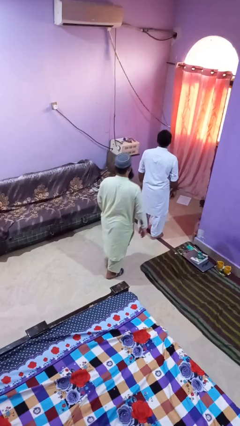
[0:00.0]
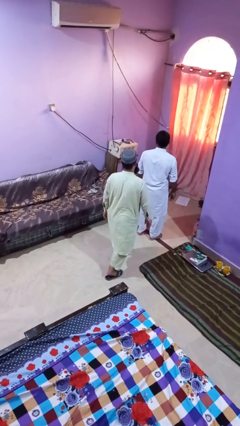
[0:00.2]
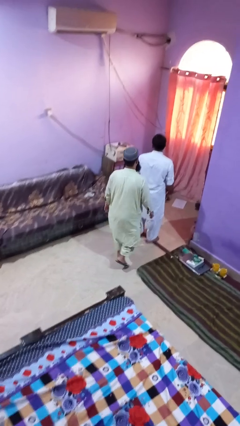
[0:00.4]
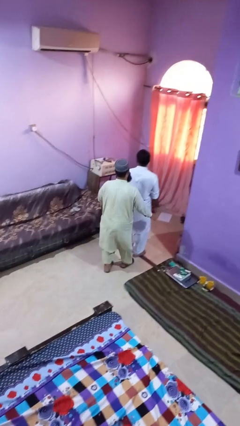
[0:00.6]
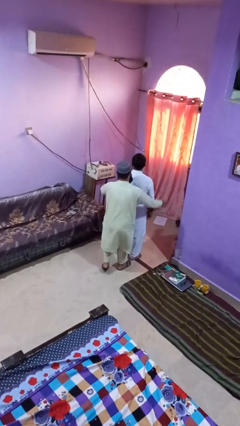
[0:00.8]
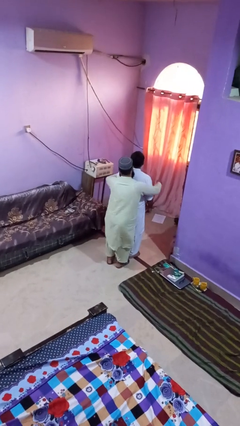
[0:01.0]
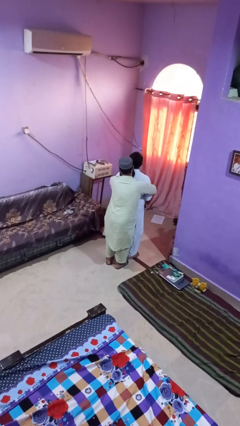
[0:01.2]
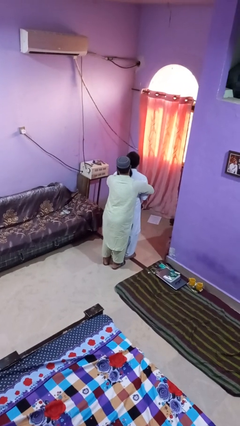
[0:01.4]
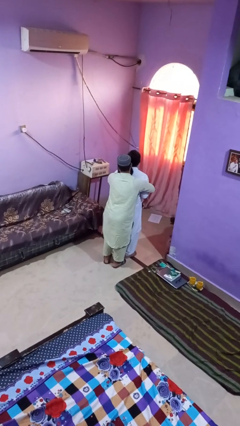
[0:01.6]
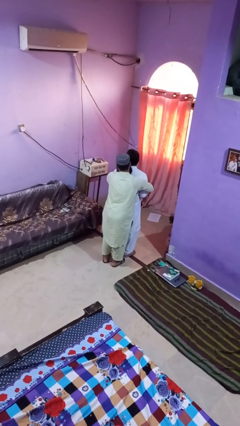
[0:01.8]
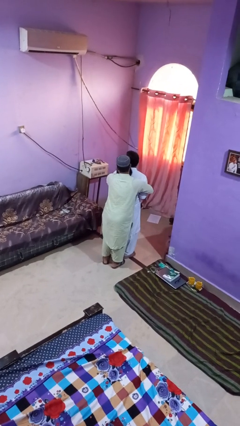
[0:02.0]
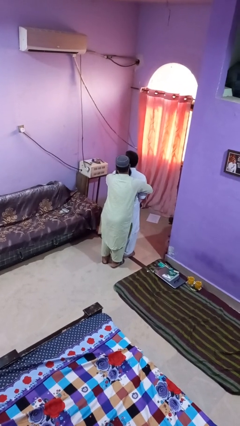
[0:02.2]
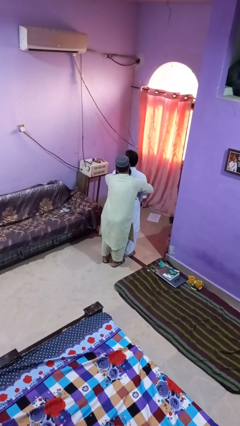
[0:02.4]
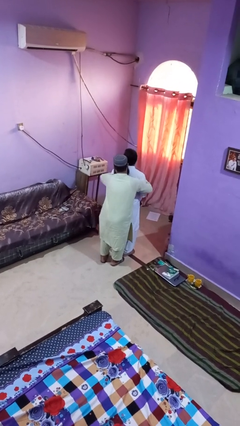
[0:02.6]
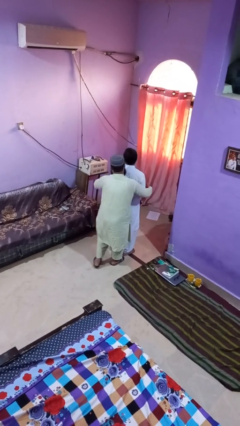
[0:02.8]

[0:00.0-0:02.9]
person hugs person from behind

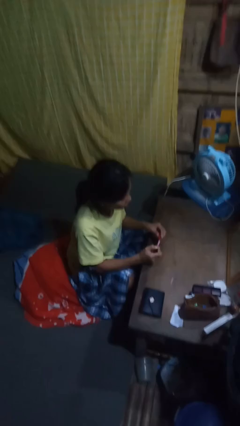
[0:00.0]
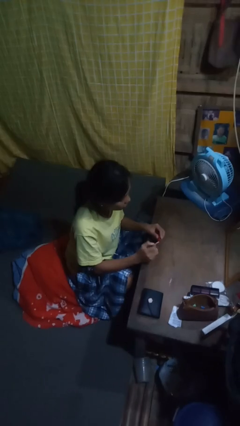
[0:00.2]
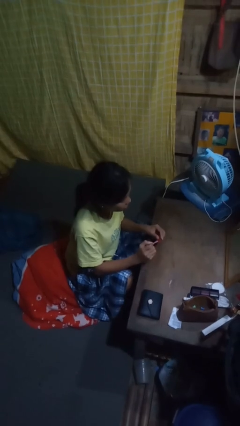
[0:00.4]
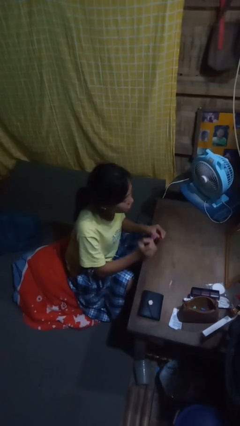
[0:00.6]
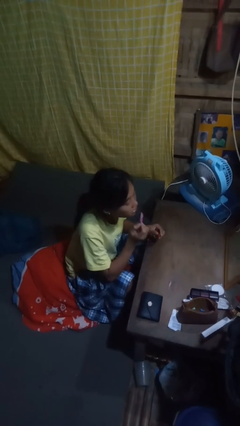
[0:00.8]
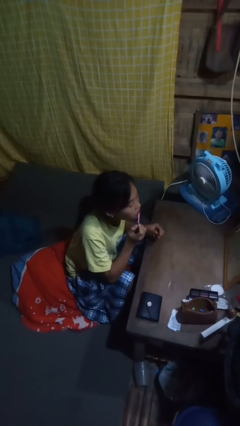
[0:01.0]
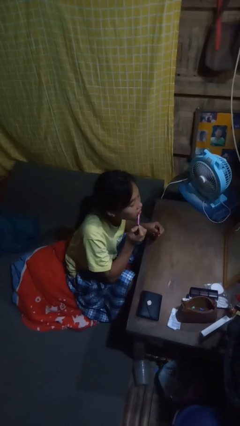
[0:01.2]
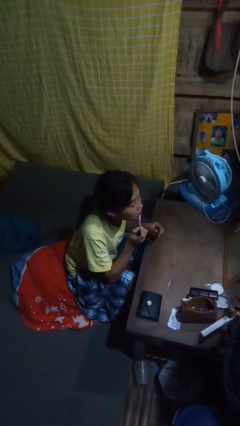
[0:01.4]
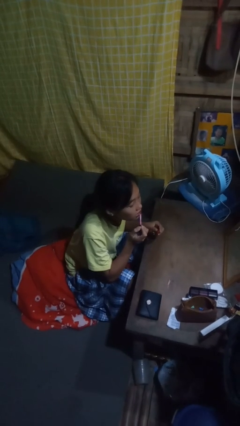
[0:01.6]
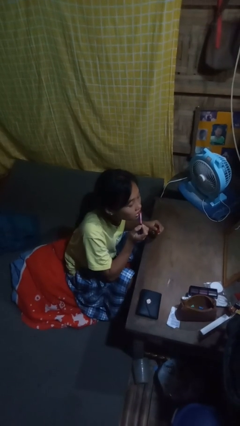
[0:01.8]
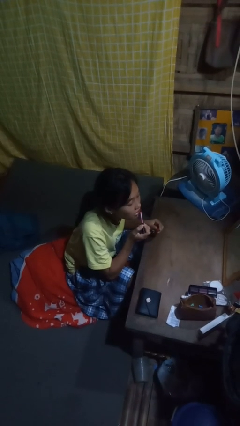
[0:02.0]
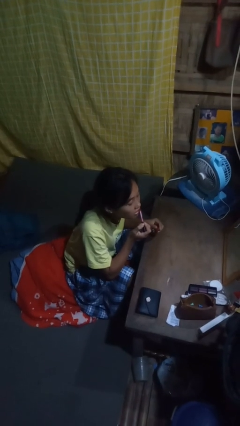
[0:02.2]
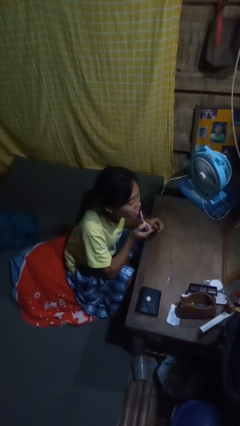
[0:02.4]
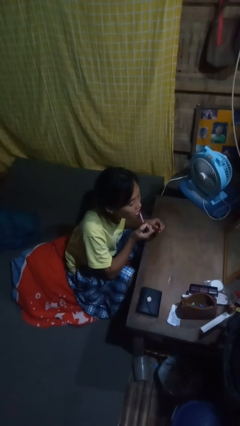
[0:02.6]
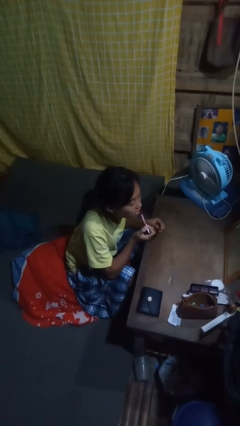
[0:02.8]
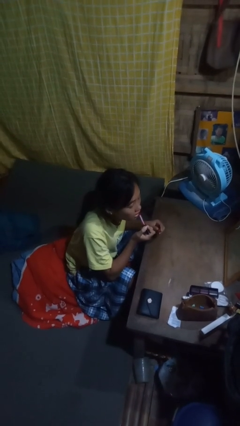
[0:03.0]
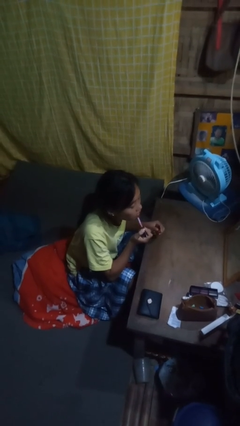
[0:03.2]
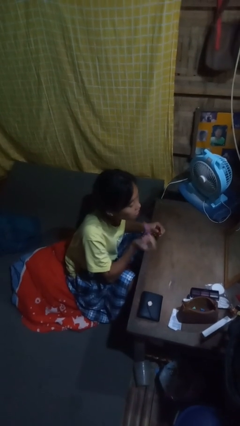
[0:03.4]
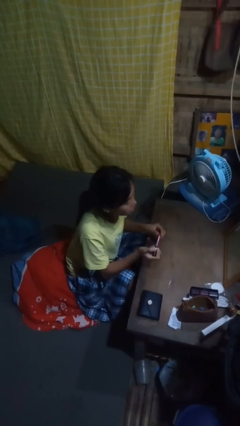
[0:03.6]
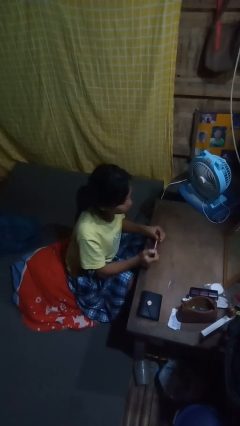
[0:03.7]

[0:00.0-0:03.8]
person applies lip makeup

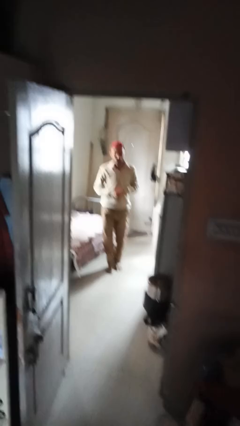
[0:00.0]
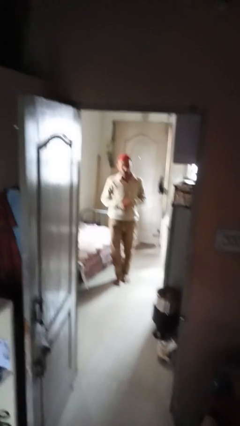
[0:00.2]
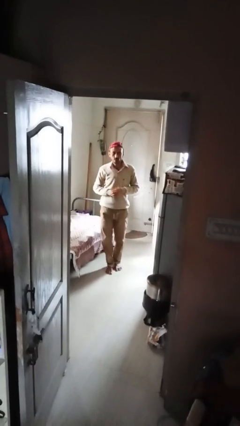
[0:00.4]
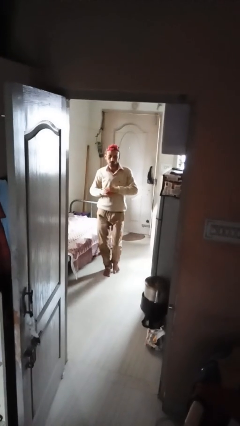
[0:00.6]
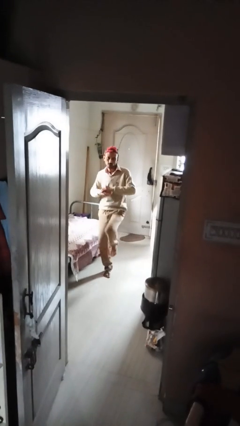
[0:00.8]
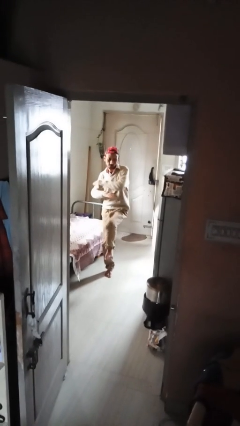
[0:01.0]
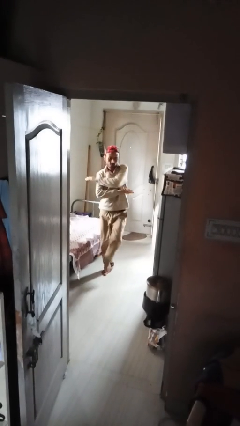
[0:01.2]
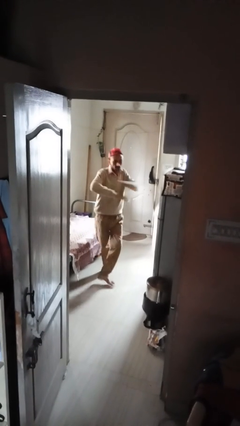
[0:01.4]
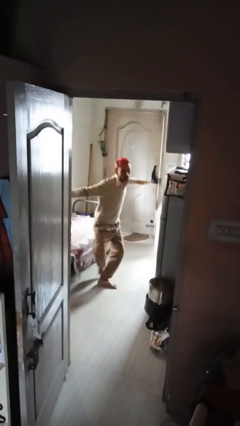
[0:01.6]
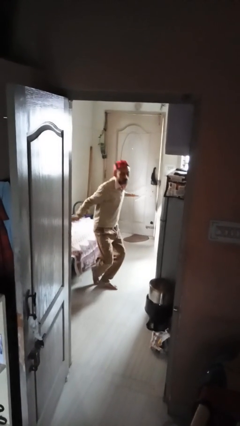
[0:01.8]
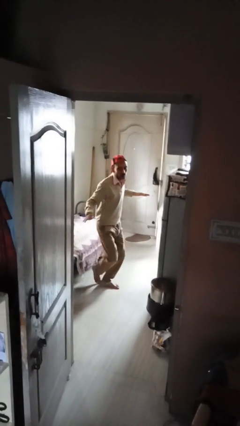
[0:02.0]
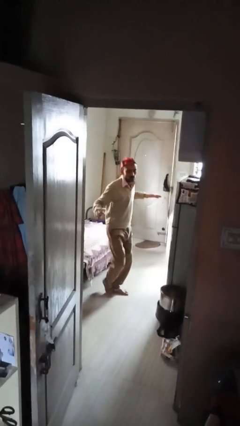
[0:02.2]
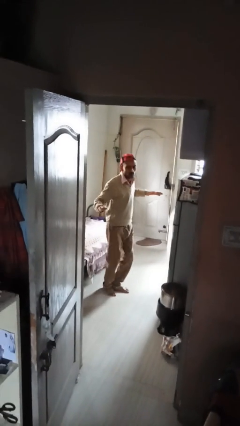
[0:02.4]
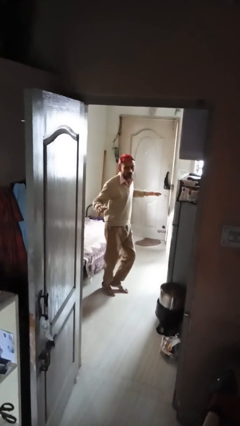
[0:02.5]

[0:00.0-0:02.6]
person karate chop

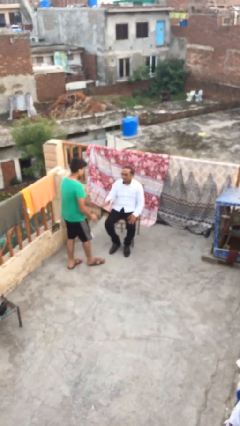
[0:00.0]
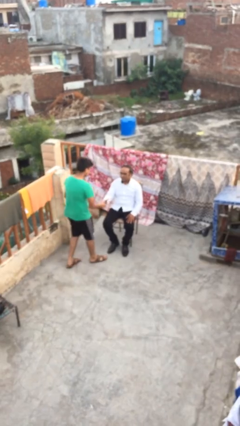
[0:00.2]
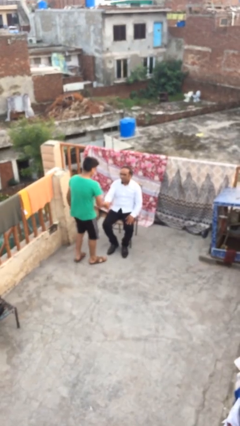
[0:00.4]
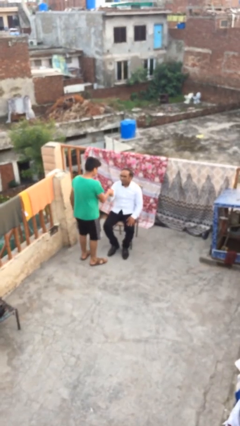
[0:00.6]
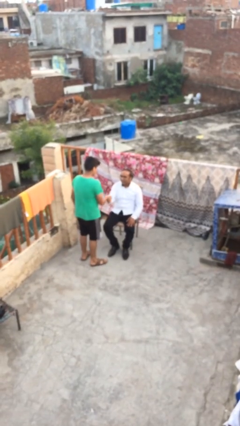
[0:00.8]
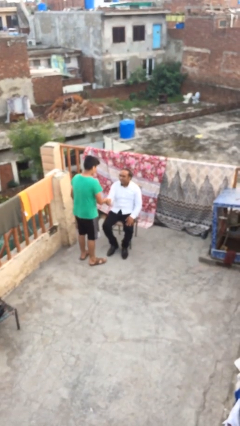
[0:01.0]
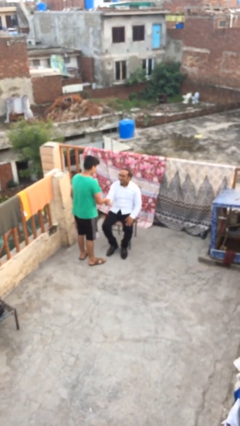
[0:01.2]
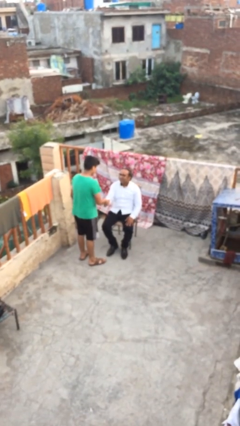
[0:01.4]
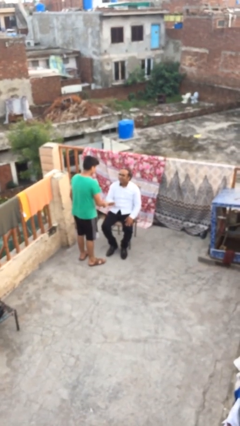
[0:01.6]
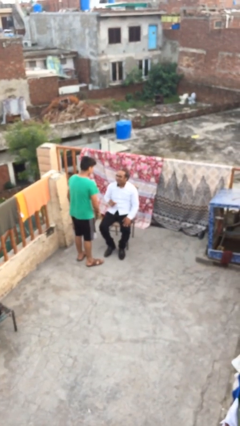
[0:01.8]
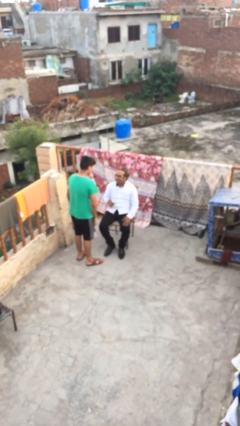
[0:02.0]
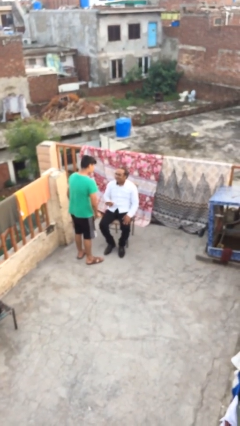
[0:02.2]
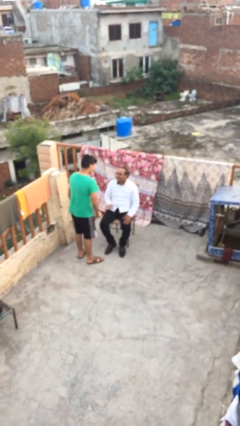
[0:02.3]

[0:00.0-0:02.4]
person shakes hand

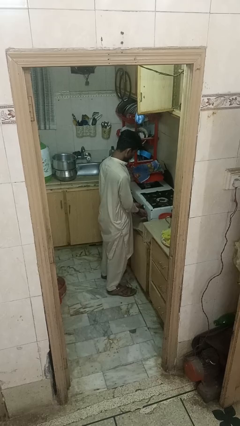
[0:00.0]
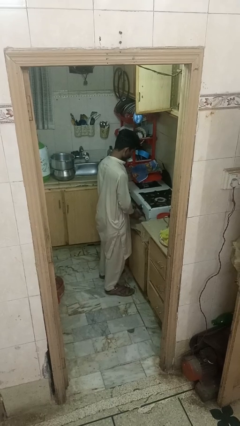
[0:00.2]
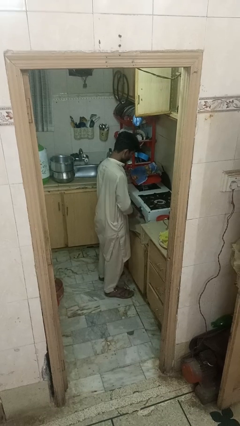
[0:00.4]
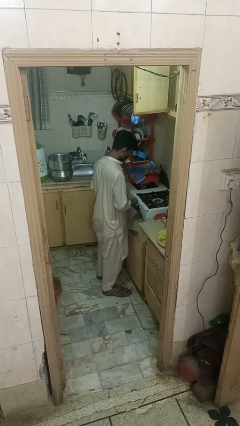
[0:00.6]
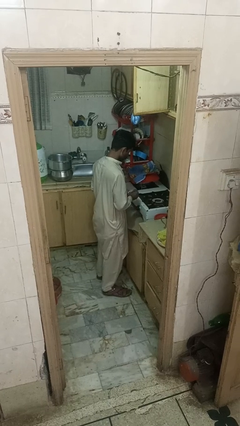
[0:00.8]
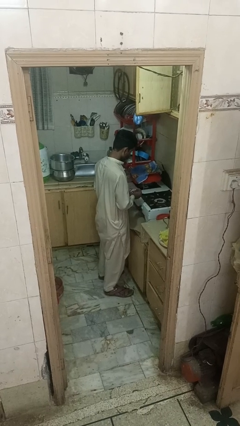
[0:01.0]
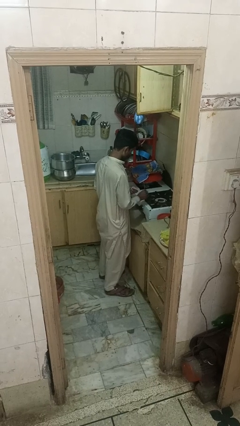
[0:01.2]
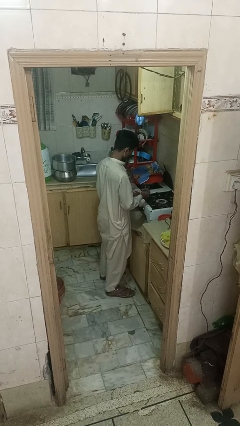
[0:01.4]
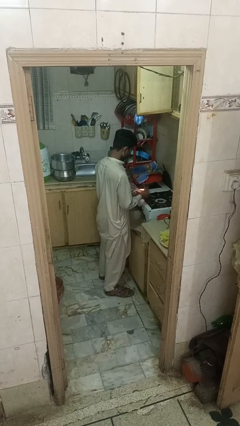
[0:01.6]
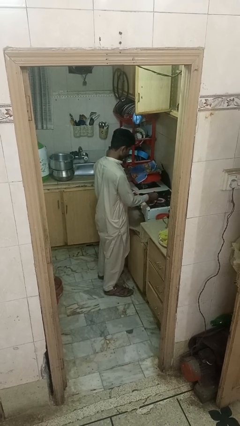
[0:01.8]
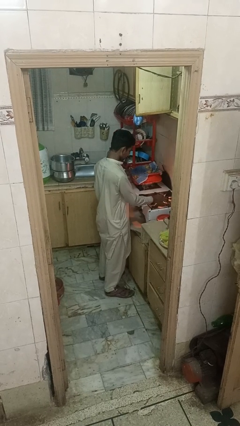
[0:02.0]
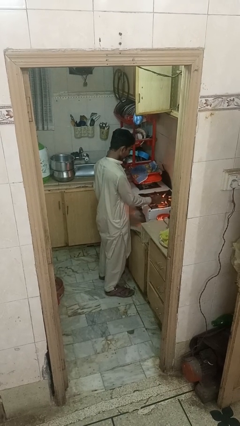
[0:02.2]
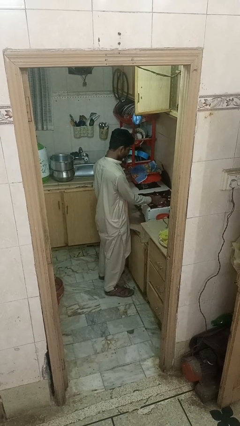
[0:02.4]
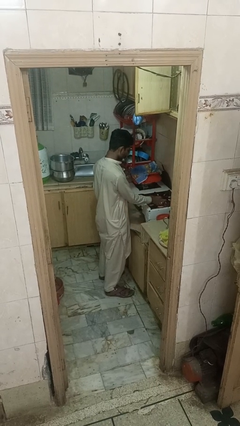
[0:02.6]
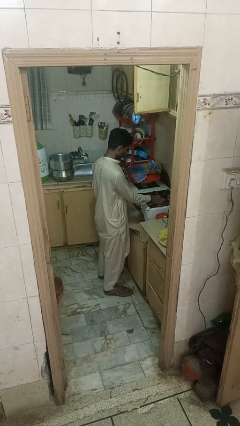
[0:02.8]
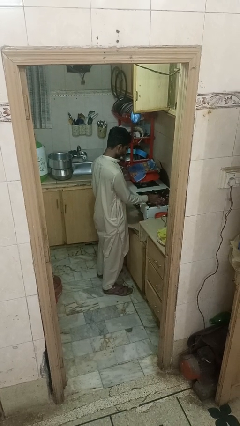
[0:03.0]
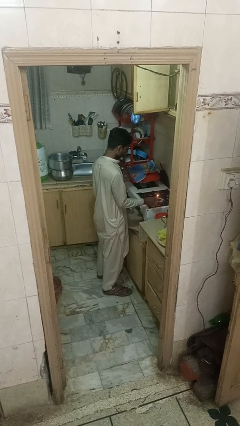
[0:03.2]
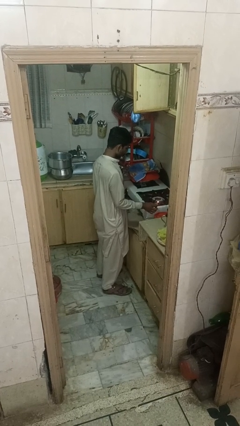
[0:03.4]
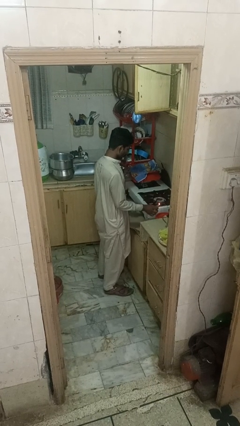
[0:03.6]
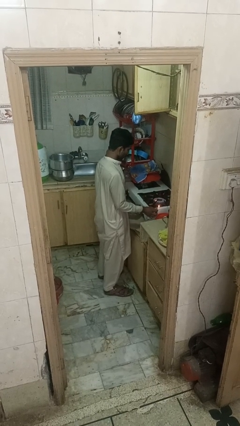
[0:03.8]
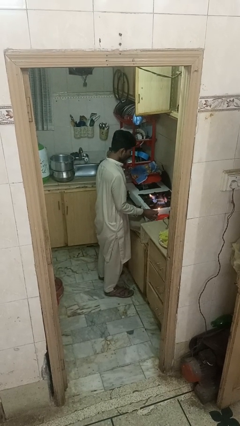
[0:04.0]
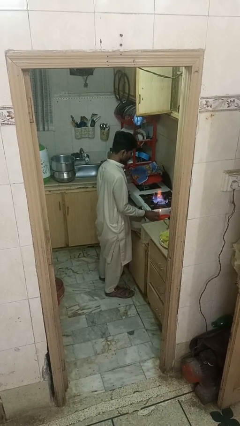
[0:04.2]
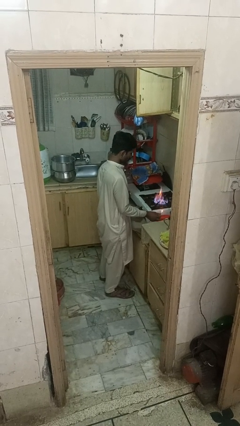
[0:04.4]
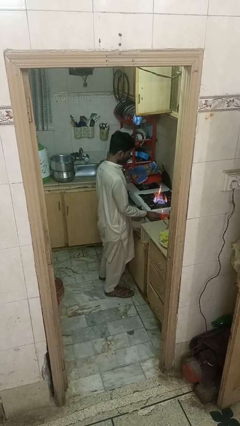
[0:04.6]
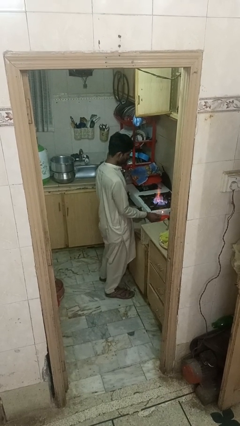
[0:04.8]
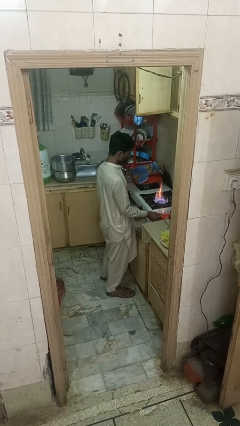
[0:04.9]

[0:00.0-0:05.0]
person turns on stovetop

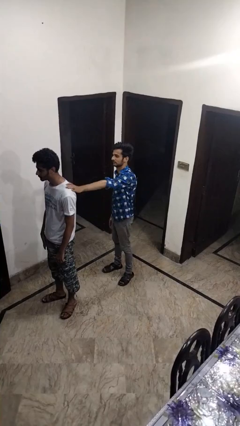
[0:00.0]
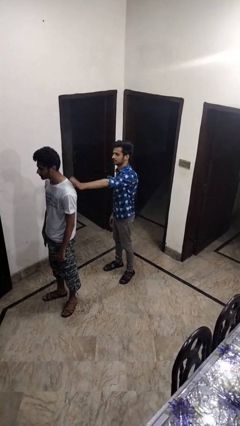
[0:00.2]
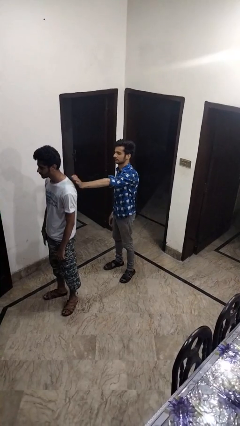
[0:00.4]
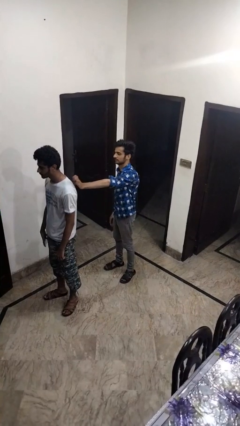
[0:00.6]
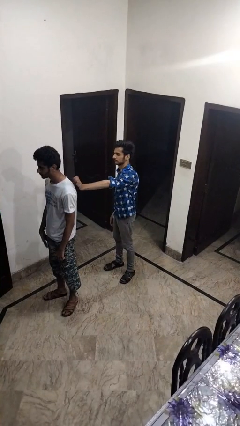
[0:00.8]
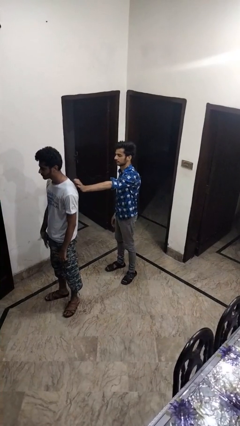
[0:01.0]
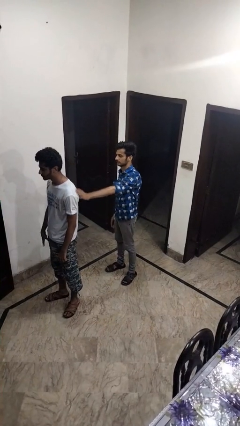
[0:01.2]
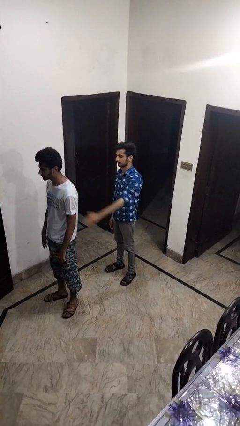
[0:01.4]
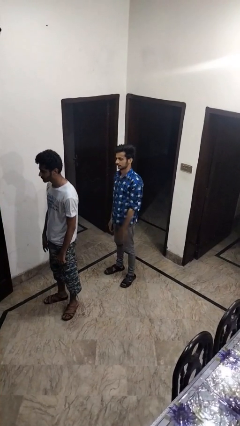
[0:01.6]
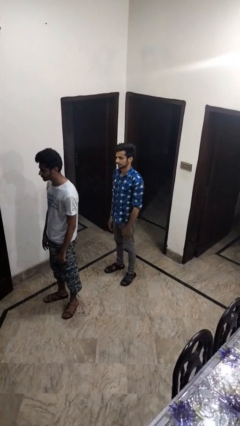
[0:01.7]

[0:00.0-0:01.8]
person touches back of person
